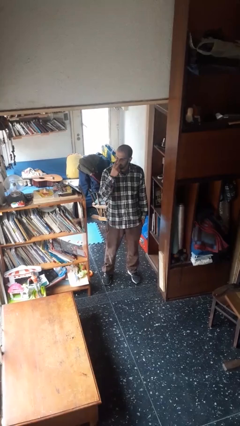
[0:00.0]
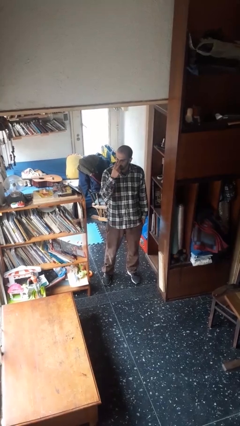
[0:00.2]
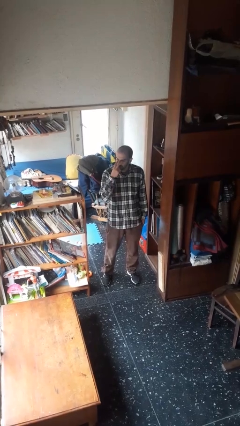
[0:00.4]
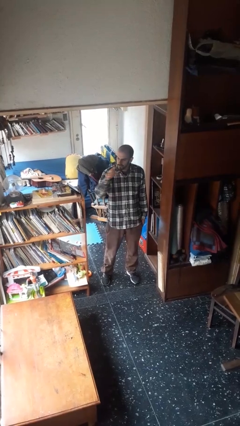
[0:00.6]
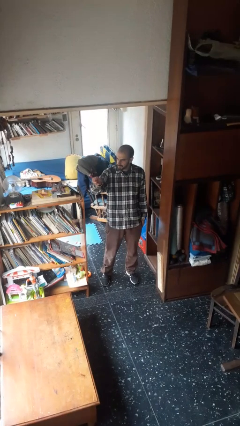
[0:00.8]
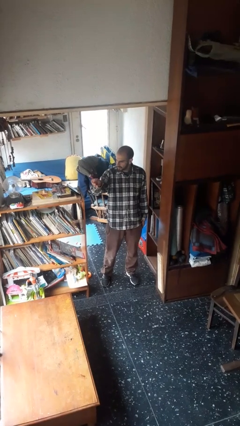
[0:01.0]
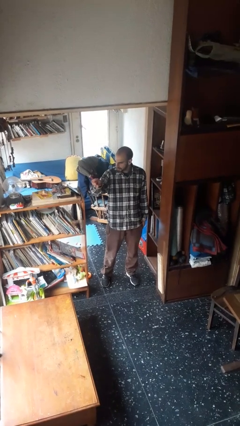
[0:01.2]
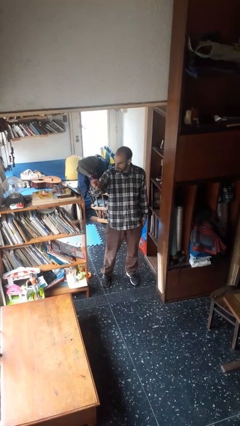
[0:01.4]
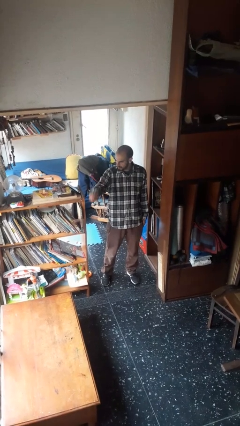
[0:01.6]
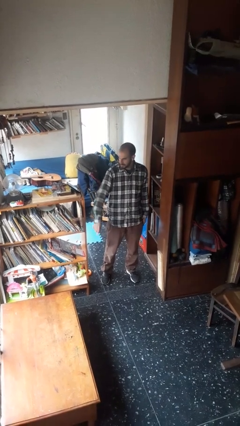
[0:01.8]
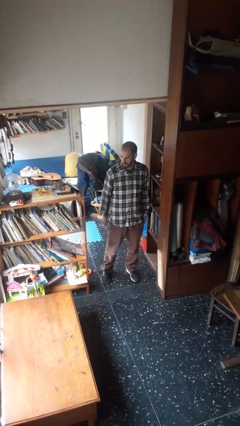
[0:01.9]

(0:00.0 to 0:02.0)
person gestures watch closely

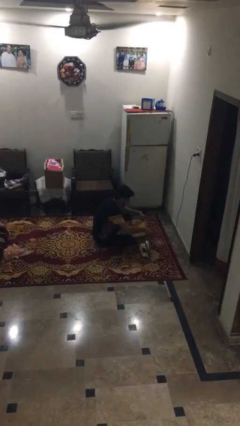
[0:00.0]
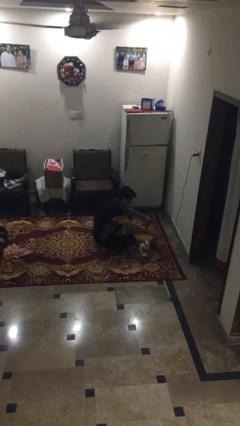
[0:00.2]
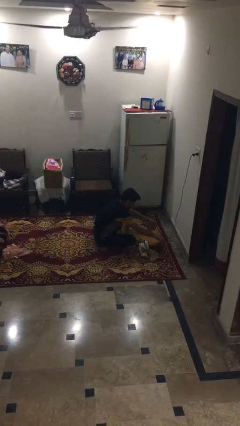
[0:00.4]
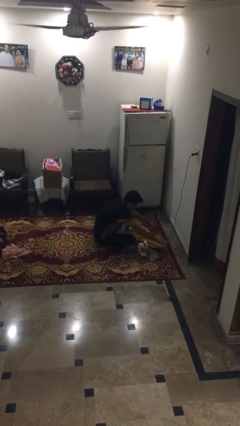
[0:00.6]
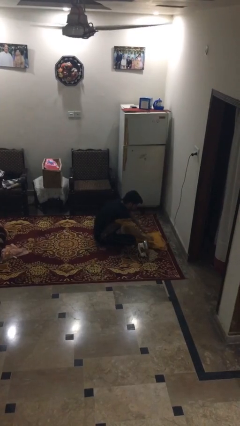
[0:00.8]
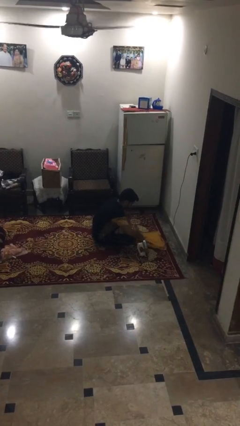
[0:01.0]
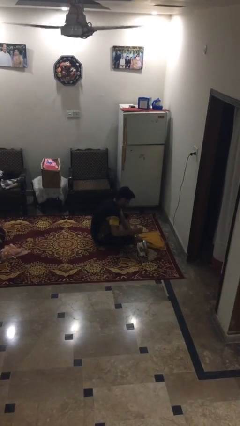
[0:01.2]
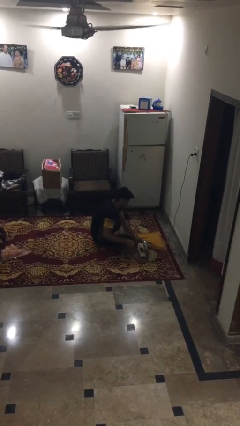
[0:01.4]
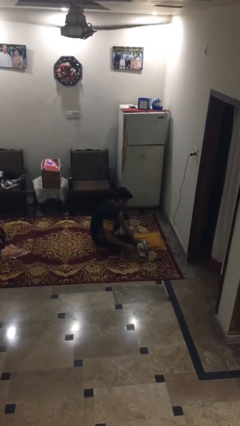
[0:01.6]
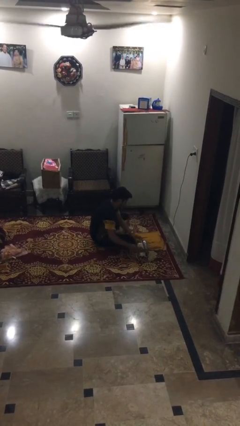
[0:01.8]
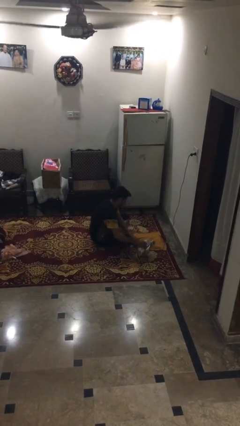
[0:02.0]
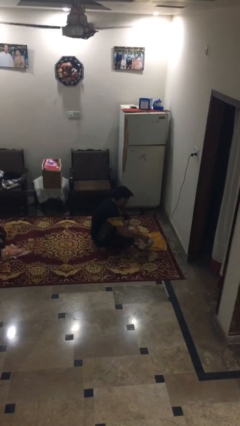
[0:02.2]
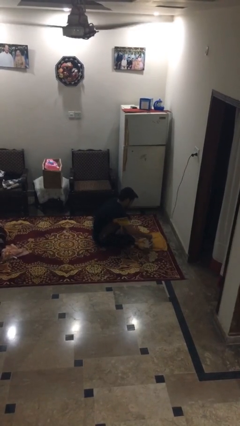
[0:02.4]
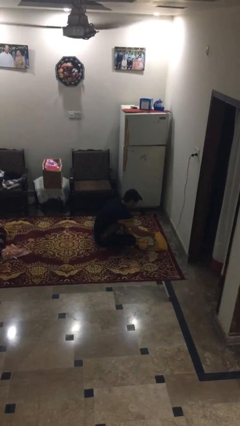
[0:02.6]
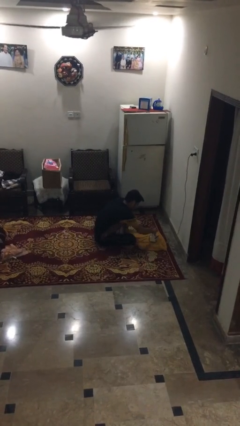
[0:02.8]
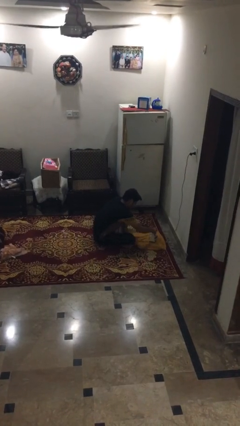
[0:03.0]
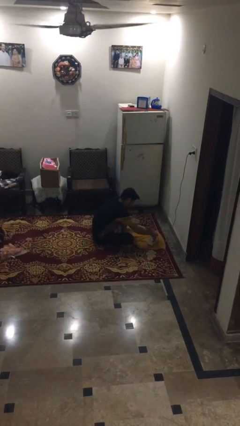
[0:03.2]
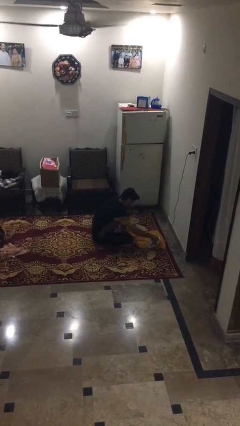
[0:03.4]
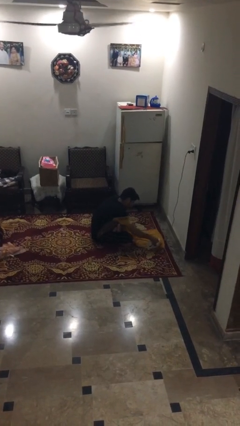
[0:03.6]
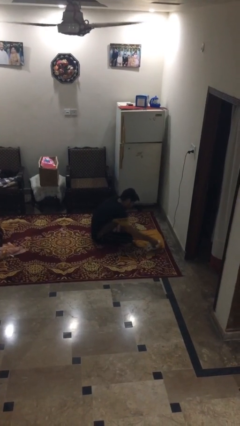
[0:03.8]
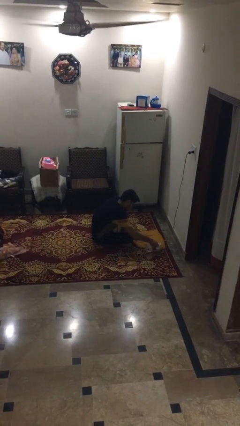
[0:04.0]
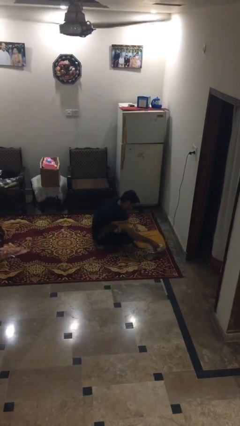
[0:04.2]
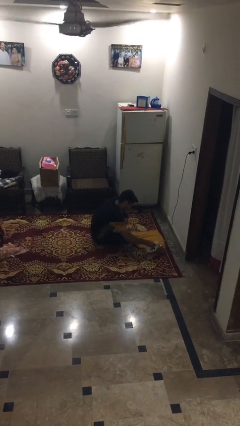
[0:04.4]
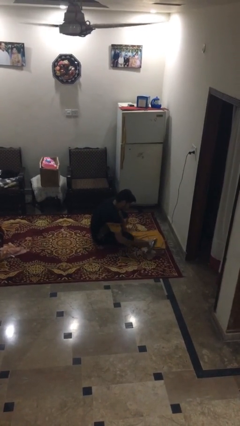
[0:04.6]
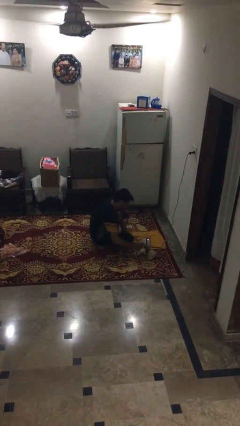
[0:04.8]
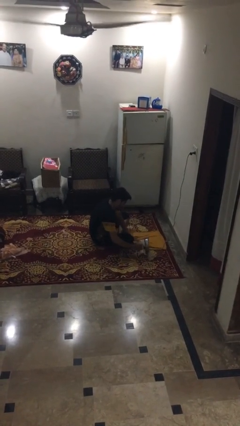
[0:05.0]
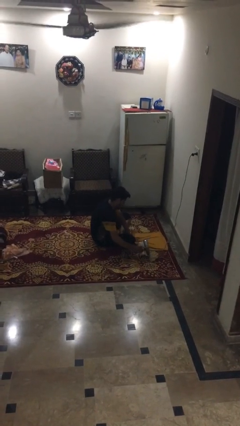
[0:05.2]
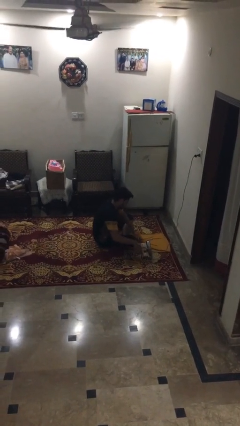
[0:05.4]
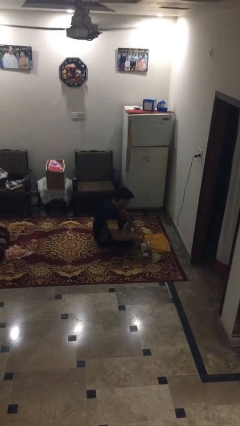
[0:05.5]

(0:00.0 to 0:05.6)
person irons clothes

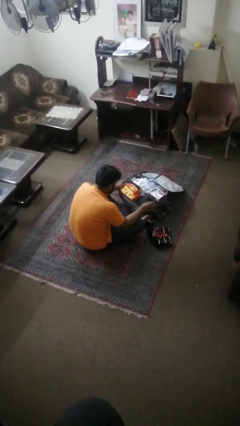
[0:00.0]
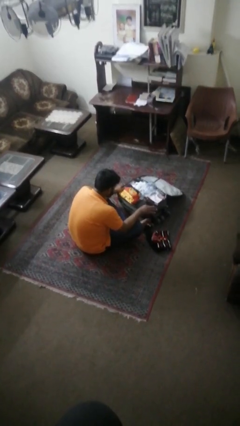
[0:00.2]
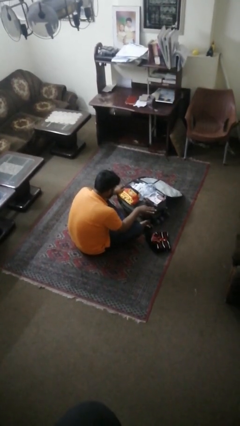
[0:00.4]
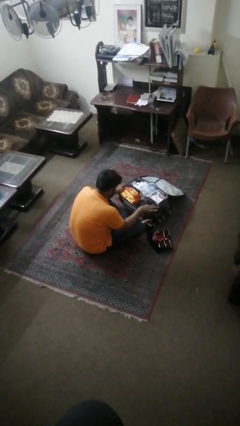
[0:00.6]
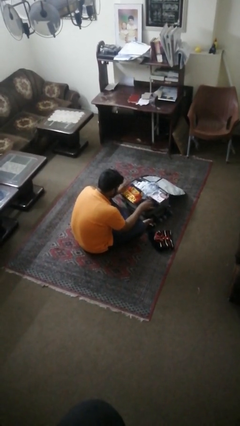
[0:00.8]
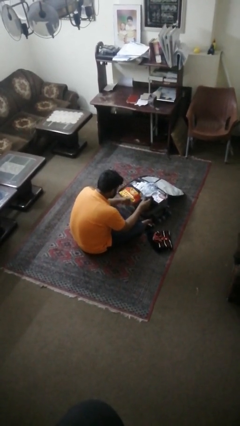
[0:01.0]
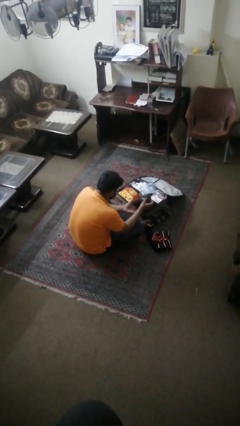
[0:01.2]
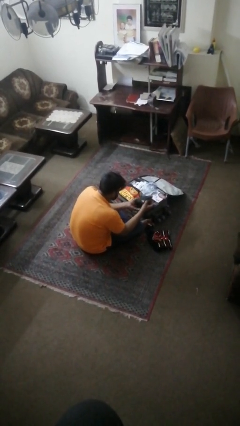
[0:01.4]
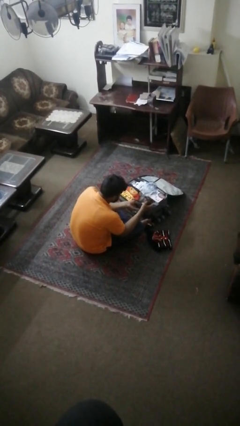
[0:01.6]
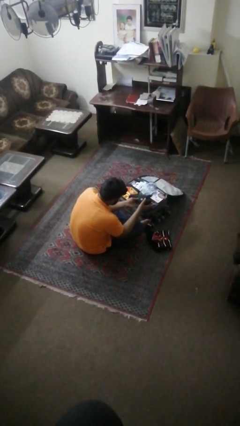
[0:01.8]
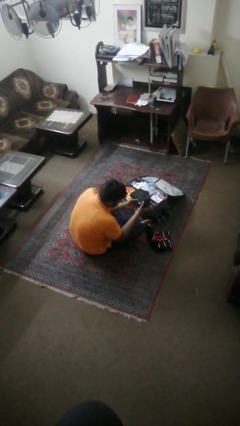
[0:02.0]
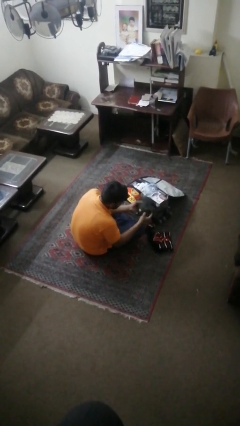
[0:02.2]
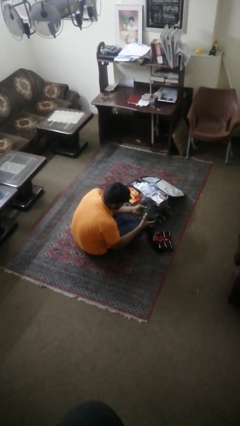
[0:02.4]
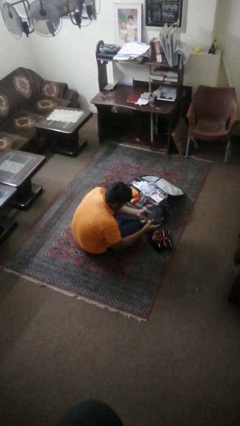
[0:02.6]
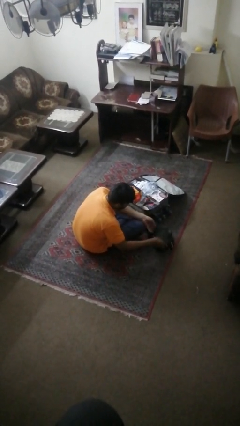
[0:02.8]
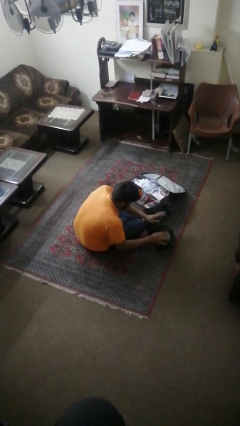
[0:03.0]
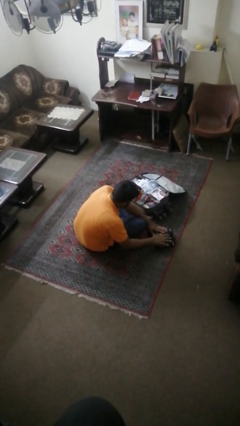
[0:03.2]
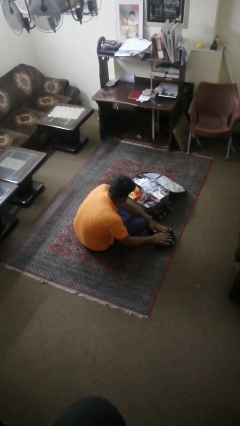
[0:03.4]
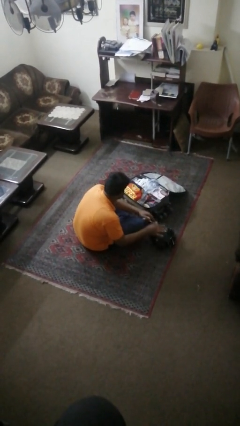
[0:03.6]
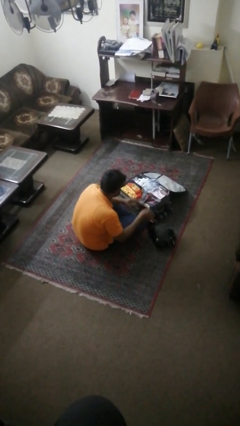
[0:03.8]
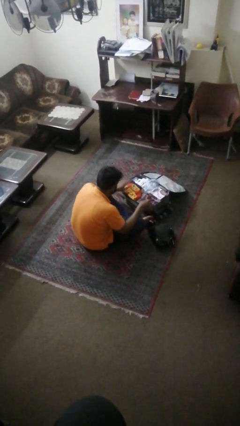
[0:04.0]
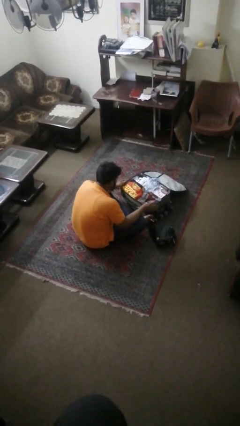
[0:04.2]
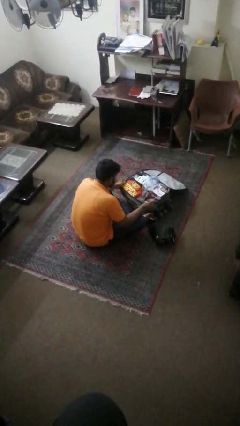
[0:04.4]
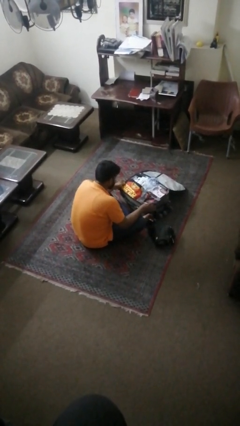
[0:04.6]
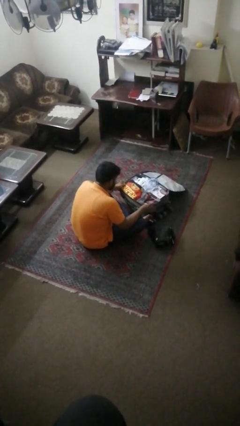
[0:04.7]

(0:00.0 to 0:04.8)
person unloads clothes from suitcase

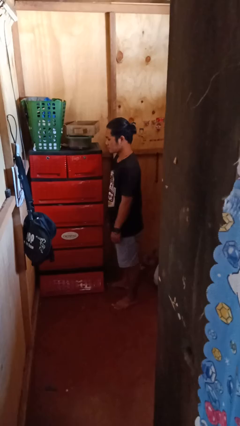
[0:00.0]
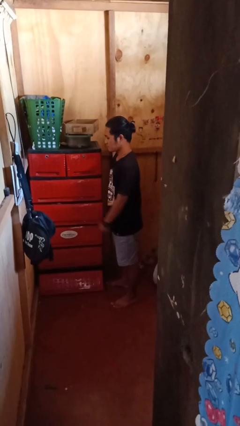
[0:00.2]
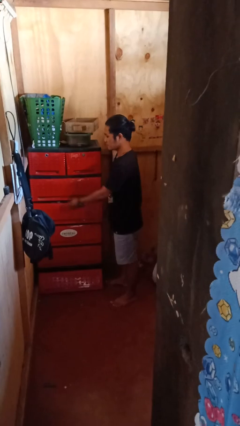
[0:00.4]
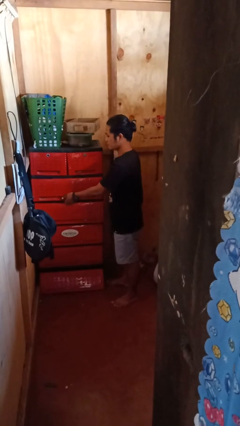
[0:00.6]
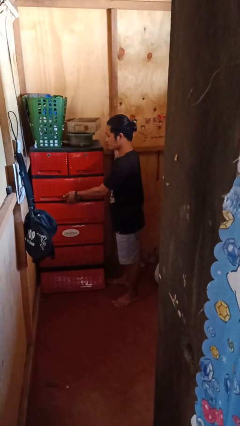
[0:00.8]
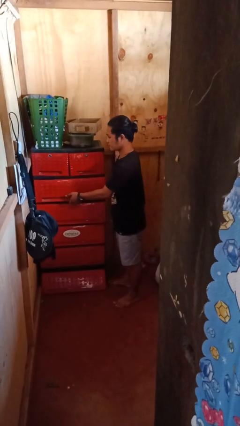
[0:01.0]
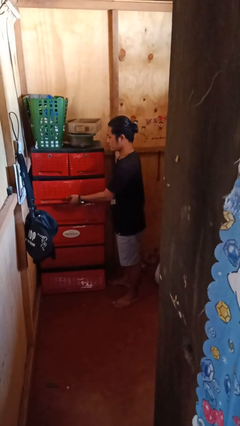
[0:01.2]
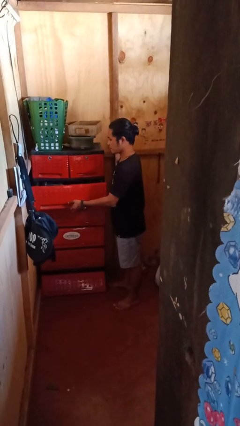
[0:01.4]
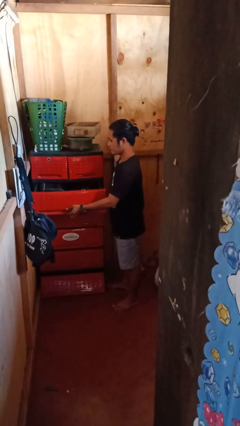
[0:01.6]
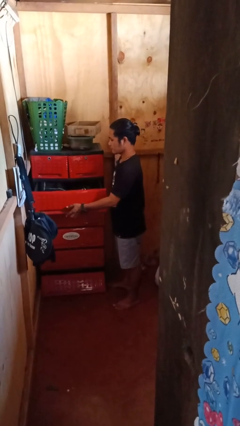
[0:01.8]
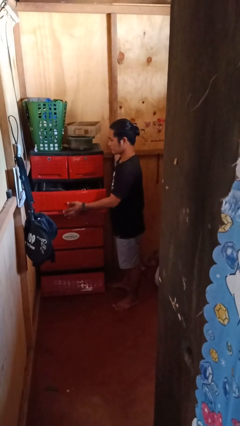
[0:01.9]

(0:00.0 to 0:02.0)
person opens dresser drawer

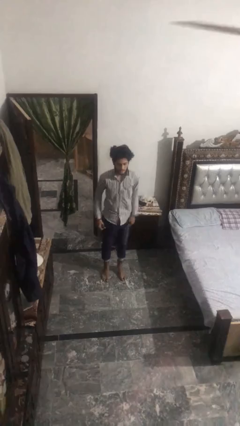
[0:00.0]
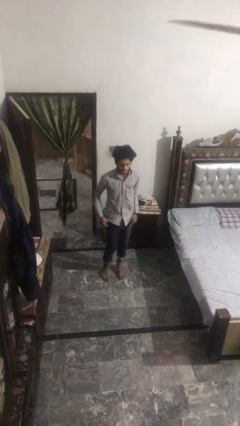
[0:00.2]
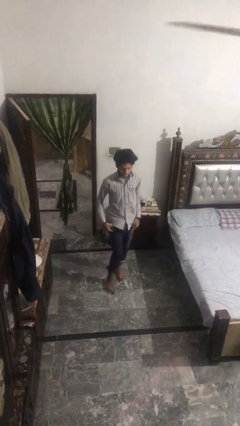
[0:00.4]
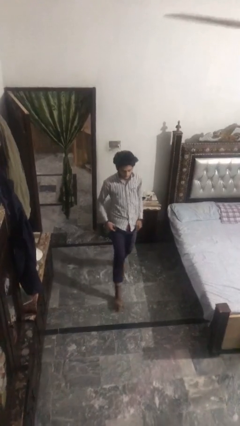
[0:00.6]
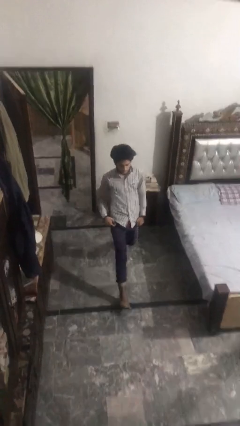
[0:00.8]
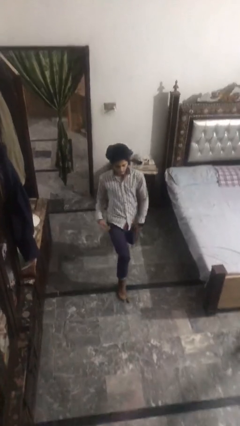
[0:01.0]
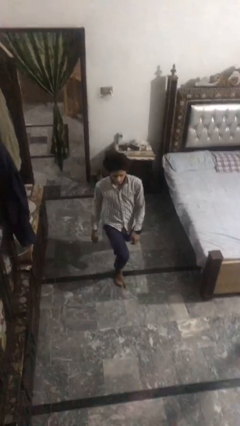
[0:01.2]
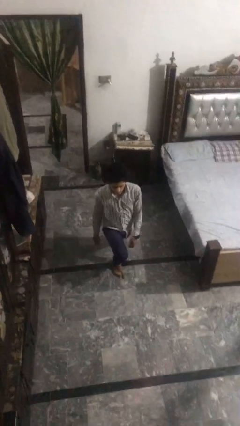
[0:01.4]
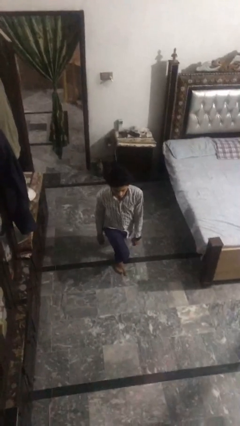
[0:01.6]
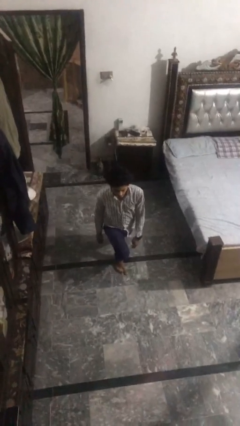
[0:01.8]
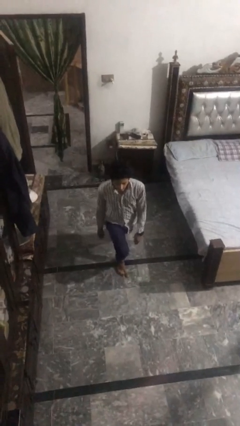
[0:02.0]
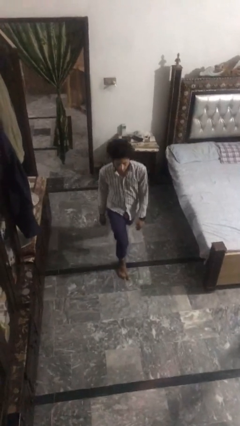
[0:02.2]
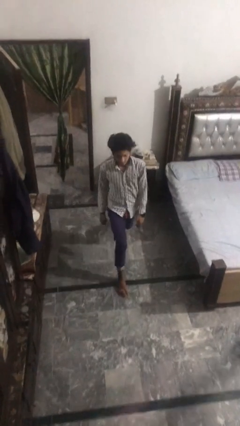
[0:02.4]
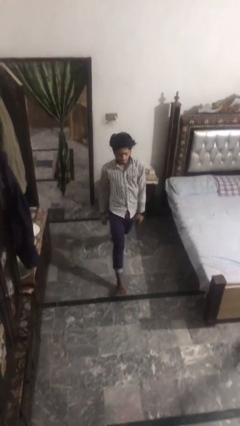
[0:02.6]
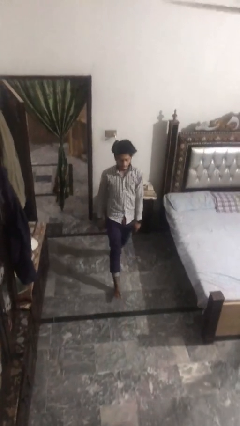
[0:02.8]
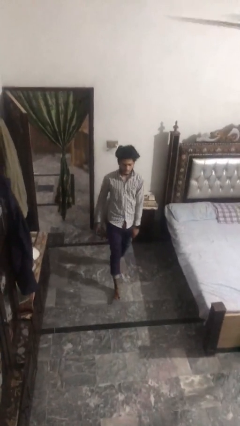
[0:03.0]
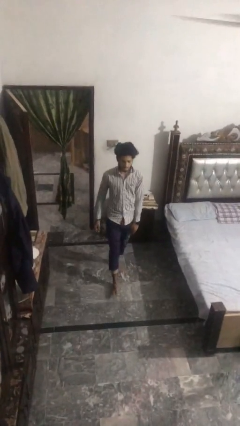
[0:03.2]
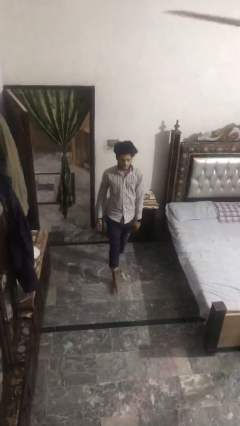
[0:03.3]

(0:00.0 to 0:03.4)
person exercises with lunges
